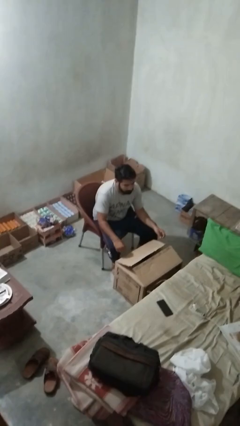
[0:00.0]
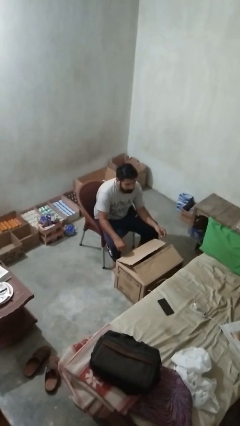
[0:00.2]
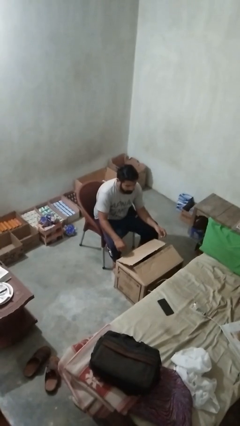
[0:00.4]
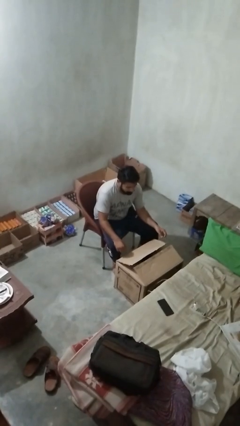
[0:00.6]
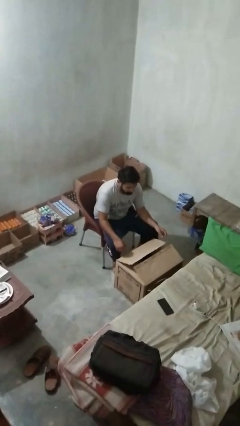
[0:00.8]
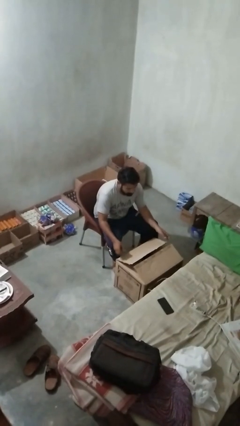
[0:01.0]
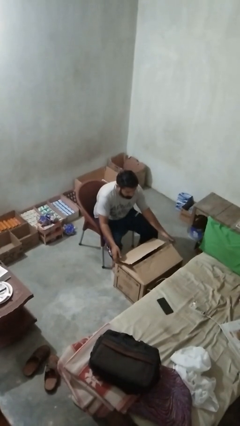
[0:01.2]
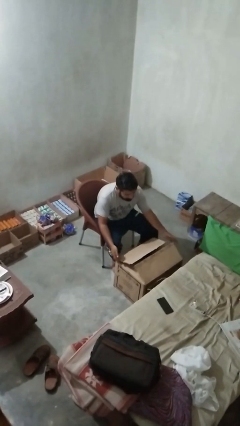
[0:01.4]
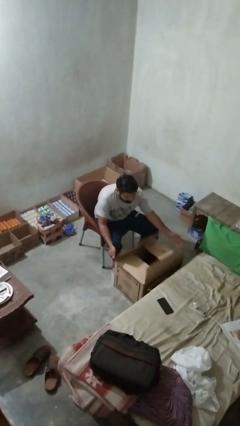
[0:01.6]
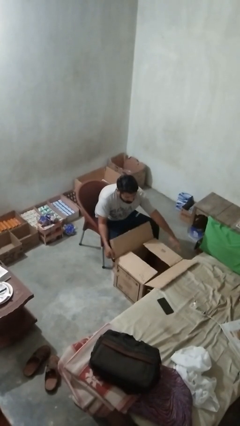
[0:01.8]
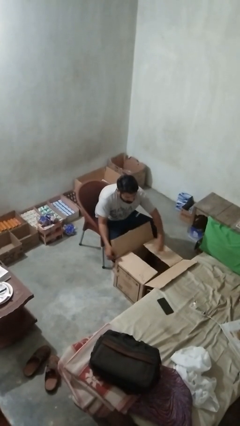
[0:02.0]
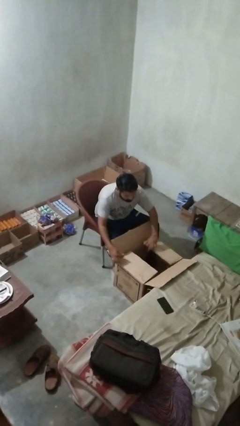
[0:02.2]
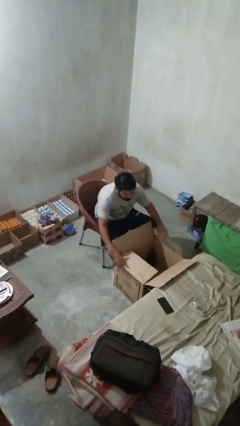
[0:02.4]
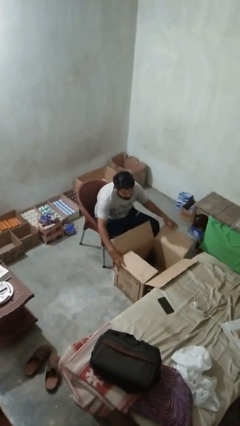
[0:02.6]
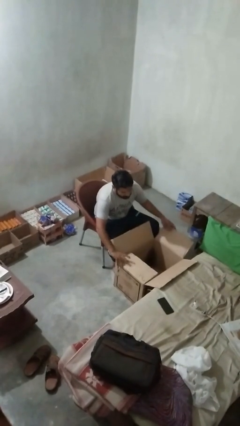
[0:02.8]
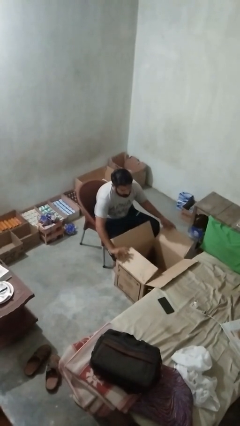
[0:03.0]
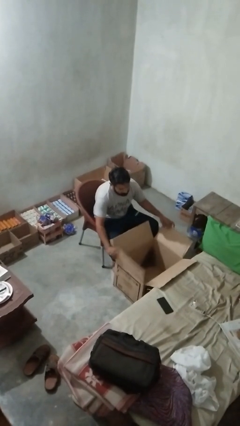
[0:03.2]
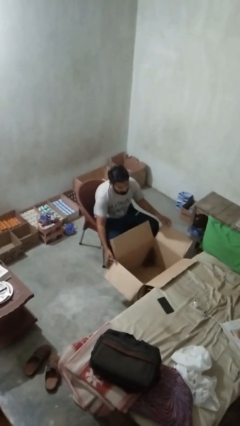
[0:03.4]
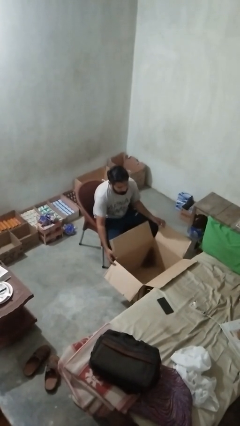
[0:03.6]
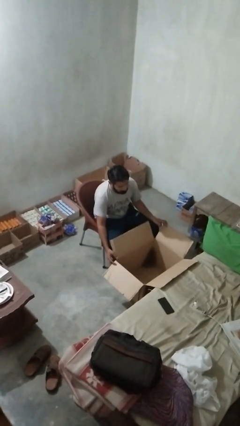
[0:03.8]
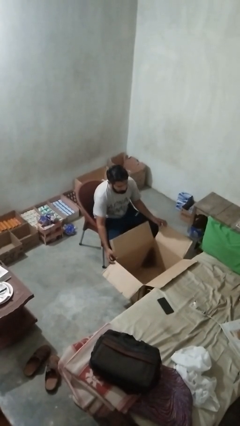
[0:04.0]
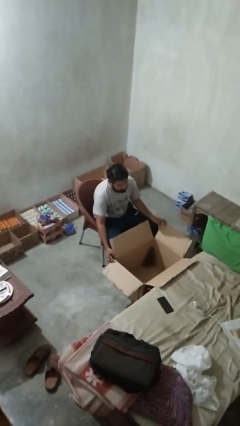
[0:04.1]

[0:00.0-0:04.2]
person opens box

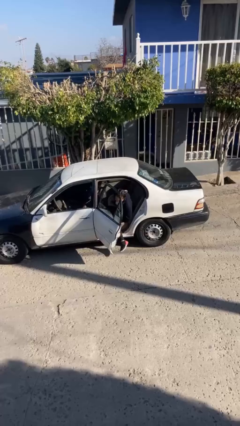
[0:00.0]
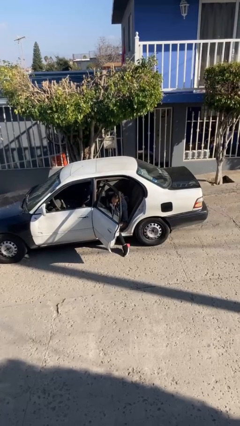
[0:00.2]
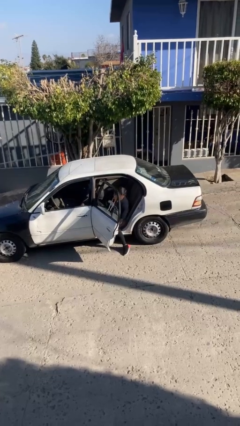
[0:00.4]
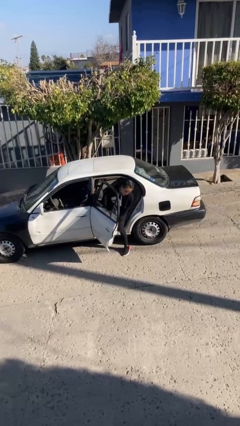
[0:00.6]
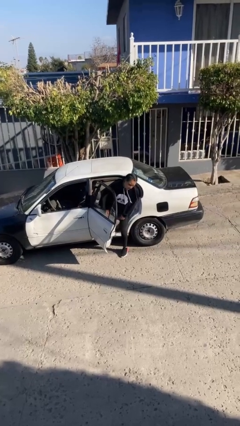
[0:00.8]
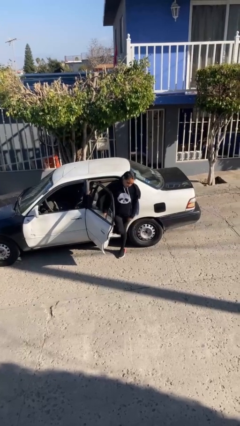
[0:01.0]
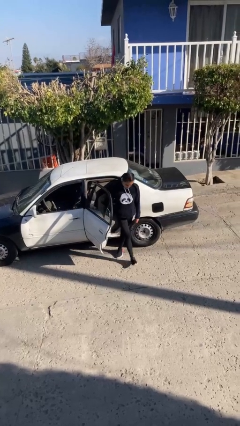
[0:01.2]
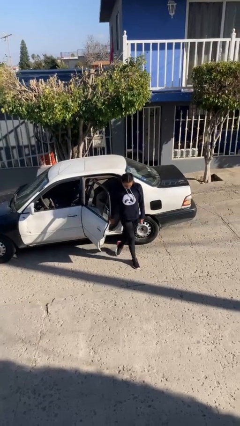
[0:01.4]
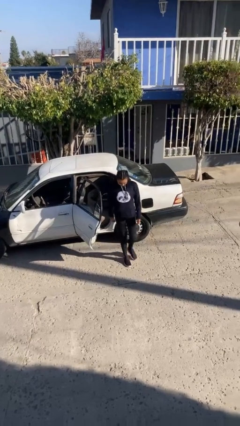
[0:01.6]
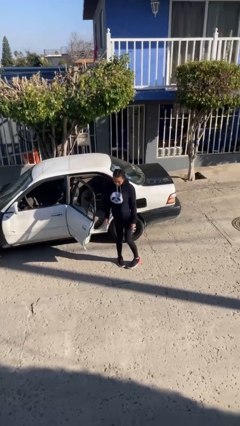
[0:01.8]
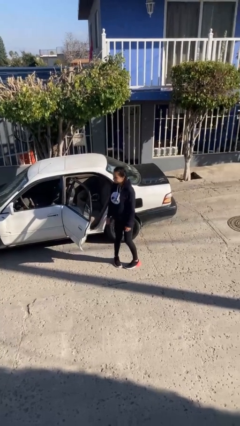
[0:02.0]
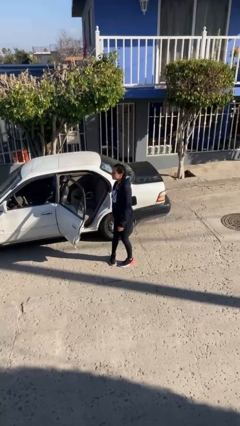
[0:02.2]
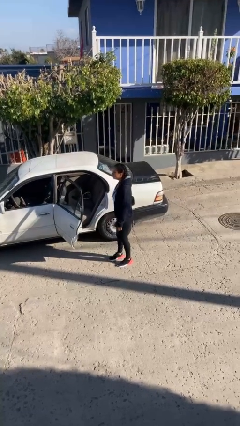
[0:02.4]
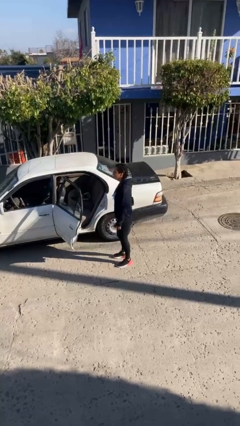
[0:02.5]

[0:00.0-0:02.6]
person exits car

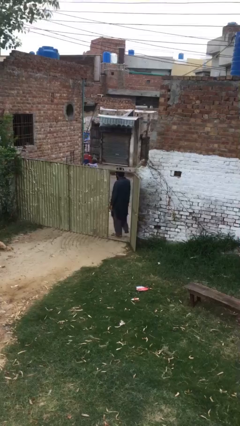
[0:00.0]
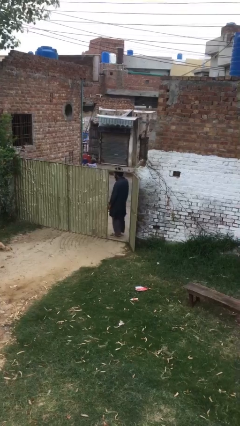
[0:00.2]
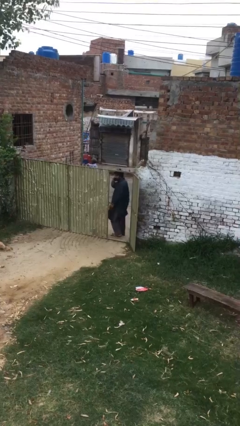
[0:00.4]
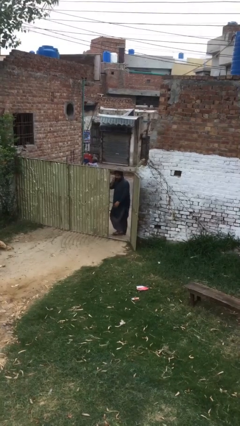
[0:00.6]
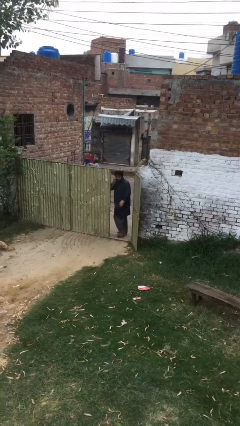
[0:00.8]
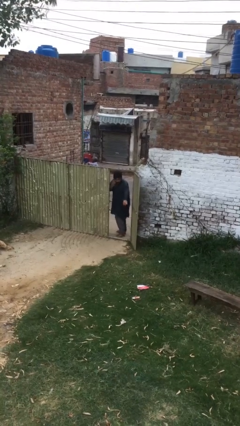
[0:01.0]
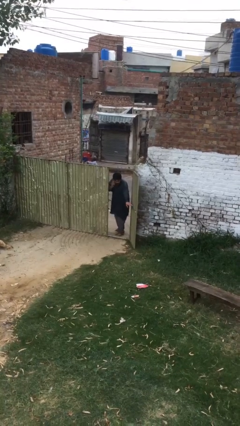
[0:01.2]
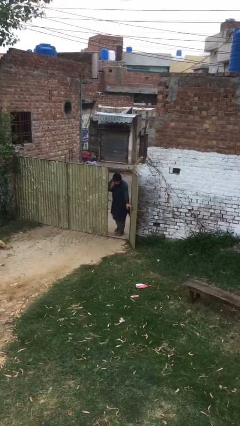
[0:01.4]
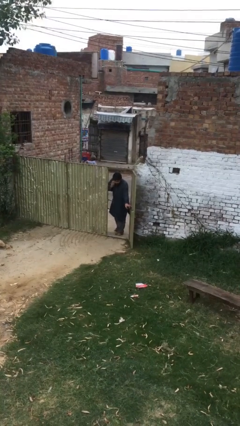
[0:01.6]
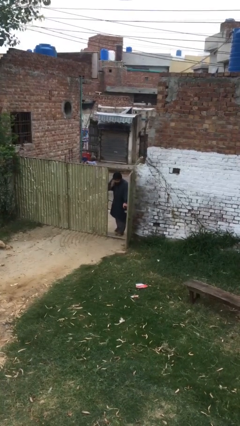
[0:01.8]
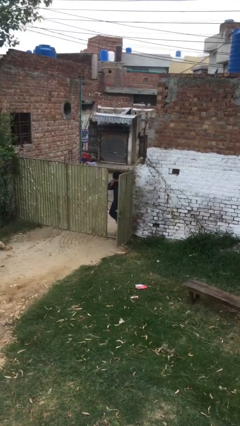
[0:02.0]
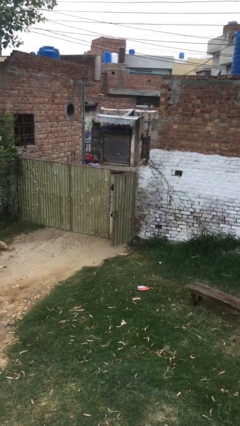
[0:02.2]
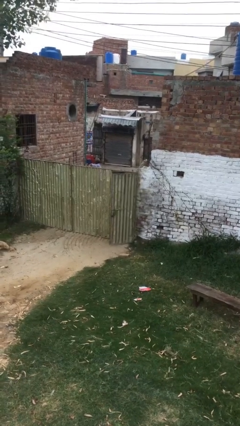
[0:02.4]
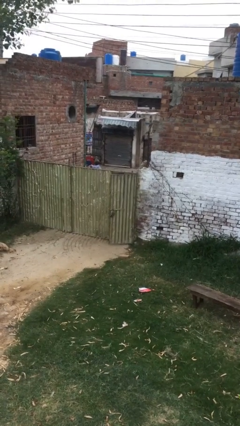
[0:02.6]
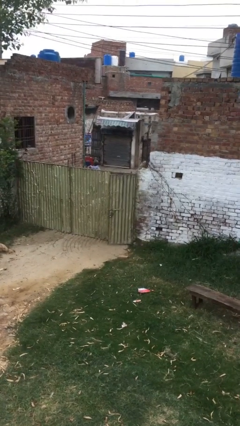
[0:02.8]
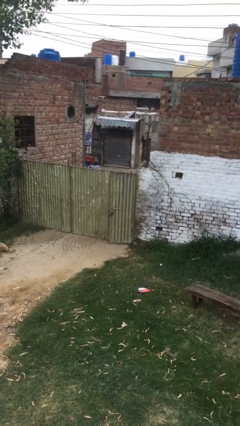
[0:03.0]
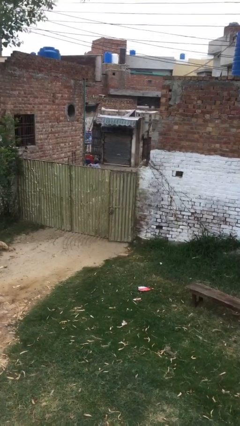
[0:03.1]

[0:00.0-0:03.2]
person closes facility door

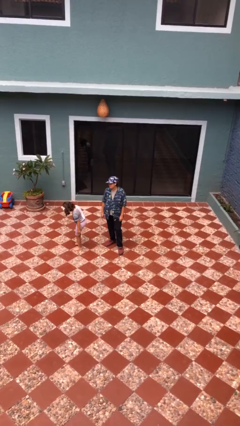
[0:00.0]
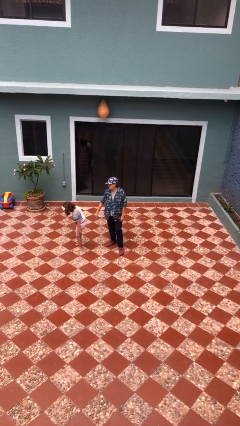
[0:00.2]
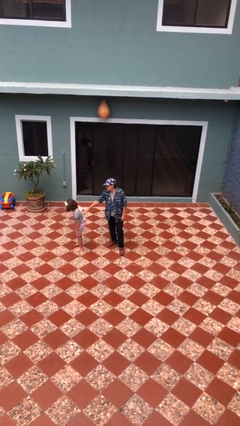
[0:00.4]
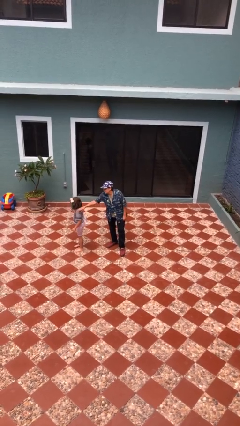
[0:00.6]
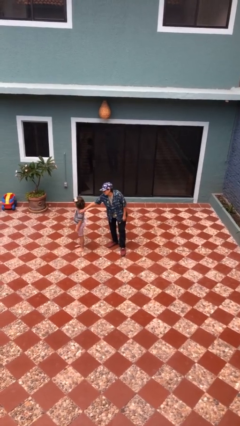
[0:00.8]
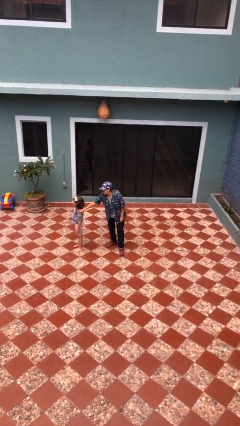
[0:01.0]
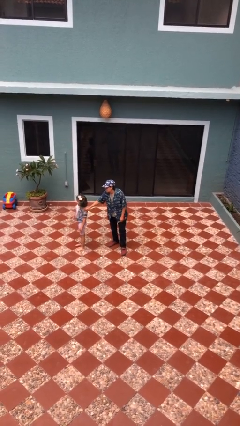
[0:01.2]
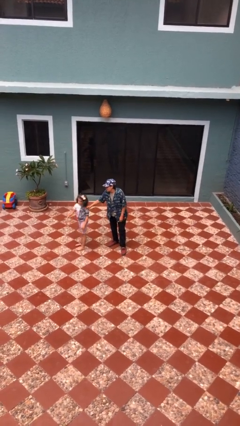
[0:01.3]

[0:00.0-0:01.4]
person grabs person by shoulder

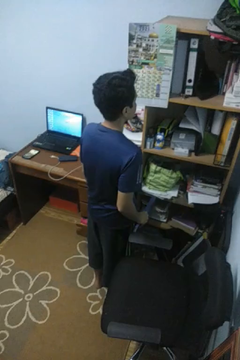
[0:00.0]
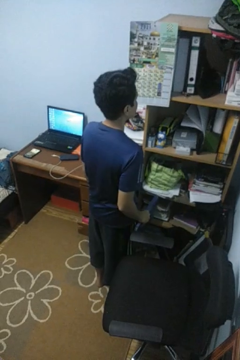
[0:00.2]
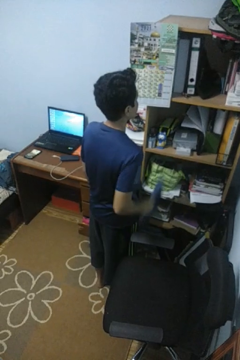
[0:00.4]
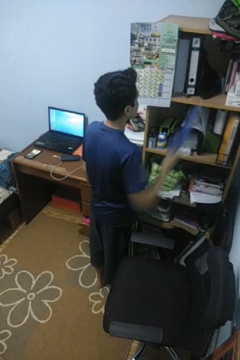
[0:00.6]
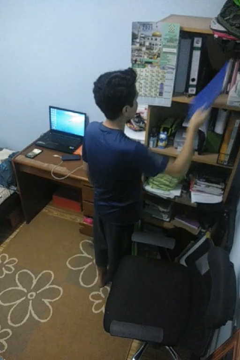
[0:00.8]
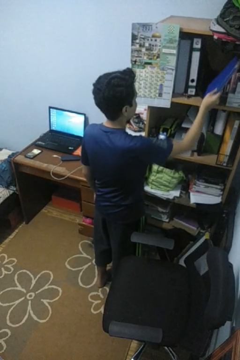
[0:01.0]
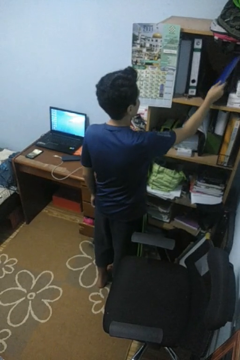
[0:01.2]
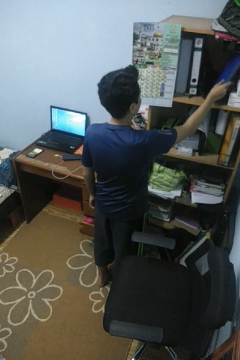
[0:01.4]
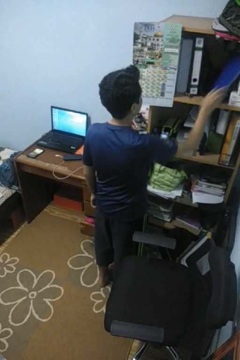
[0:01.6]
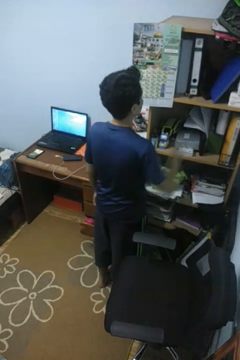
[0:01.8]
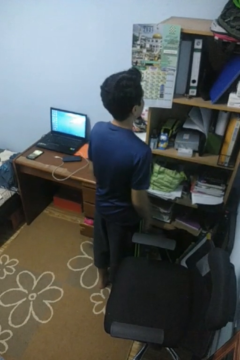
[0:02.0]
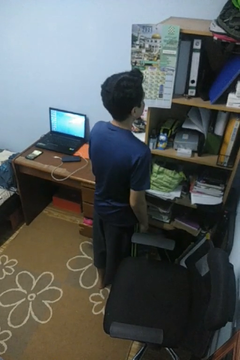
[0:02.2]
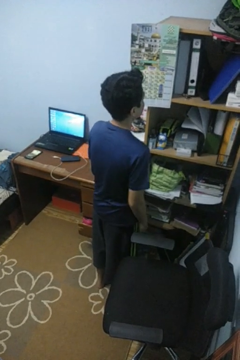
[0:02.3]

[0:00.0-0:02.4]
person puts down object into cabinet

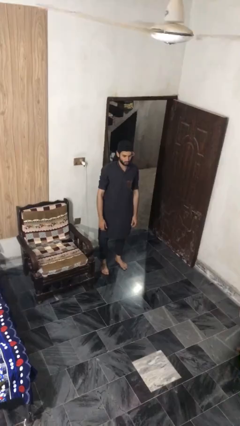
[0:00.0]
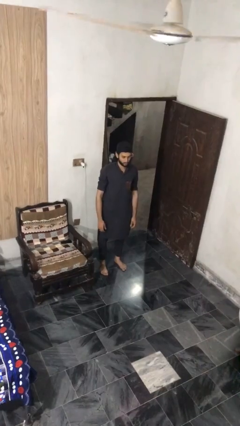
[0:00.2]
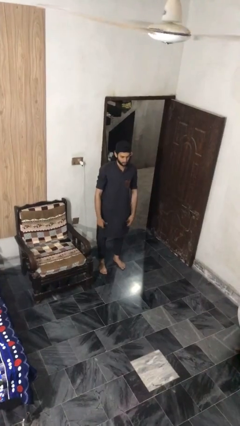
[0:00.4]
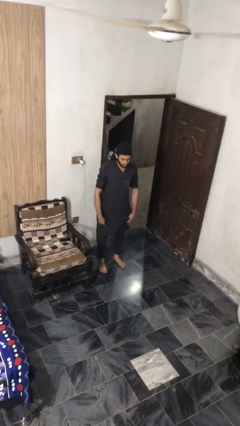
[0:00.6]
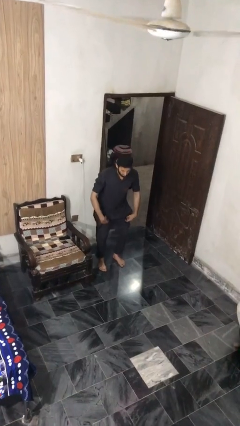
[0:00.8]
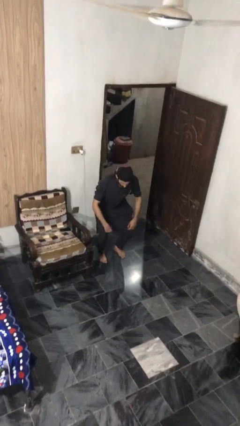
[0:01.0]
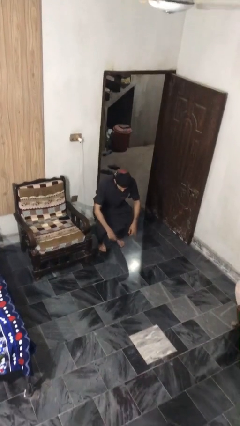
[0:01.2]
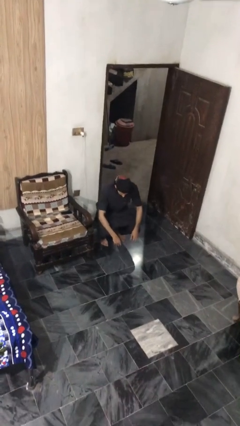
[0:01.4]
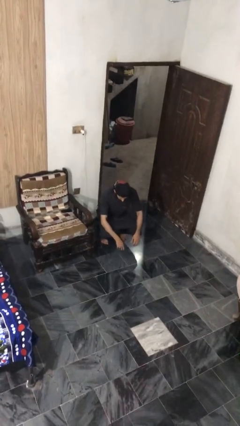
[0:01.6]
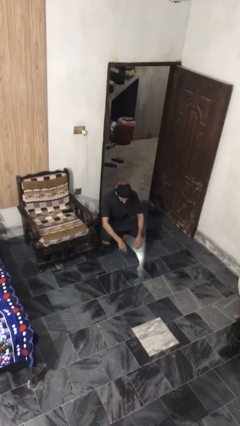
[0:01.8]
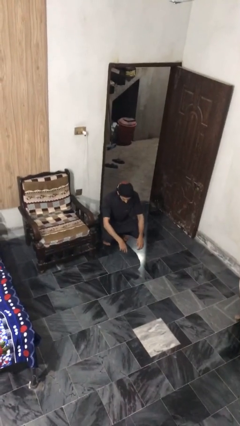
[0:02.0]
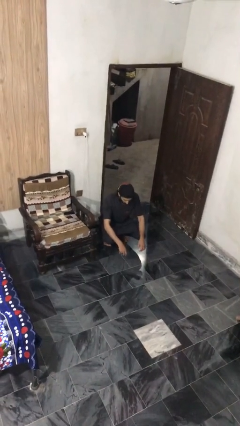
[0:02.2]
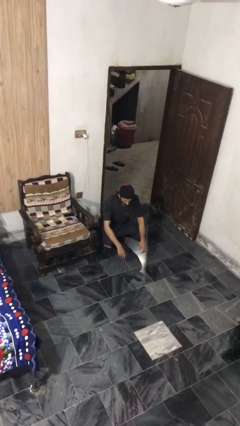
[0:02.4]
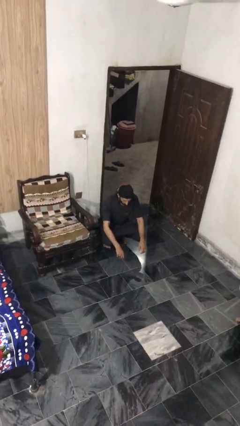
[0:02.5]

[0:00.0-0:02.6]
person squats

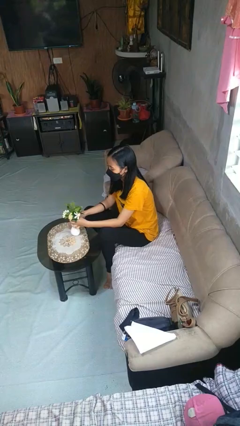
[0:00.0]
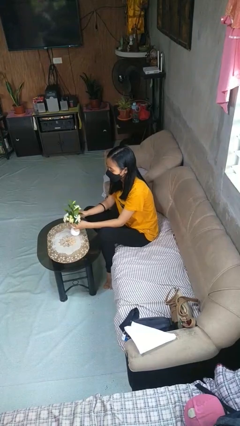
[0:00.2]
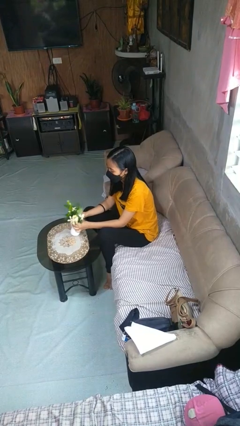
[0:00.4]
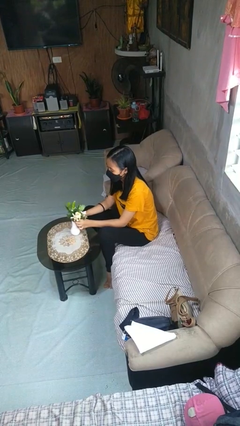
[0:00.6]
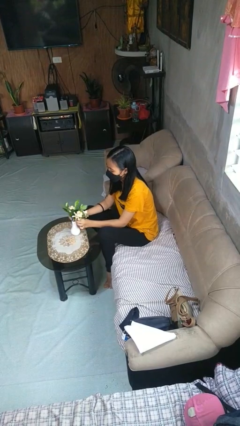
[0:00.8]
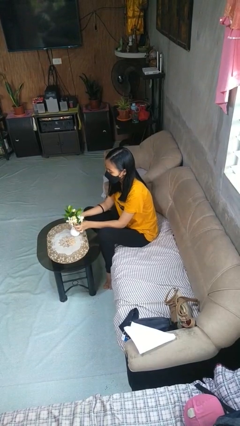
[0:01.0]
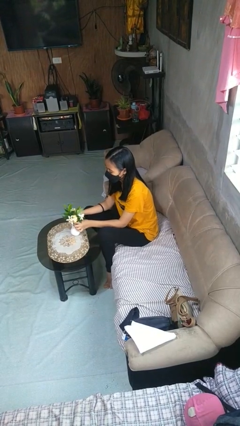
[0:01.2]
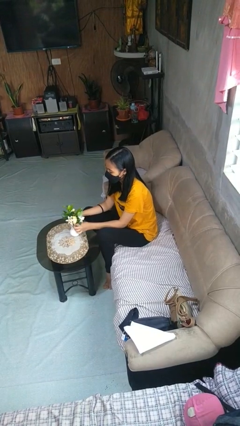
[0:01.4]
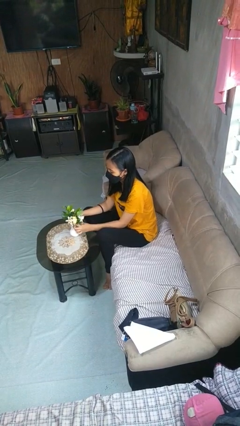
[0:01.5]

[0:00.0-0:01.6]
person arranges flowers in vase
